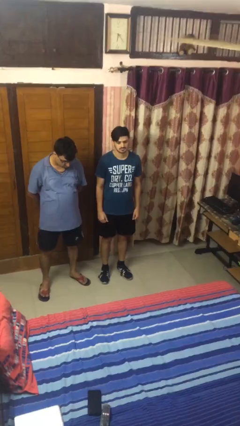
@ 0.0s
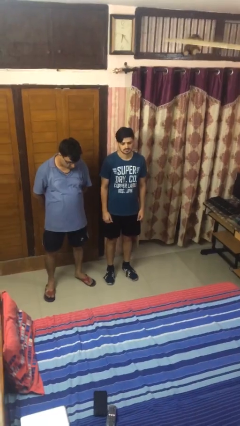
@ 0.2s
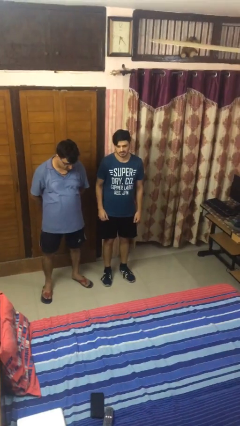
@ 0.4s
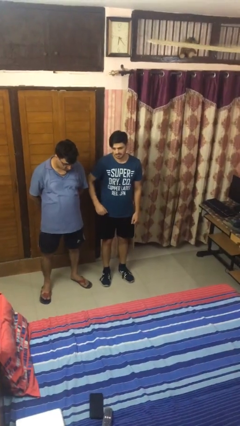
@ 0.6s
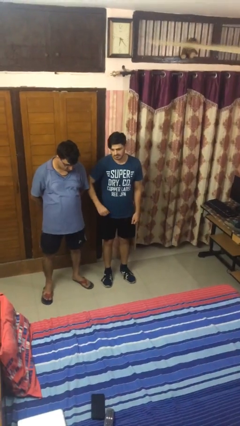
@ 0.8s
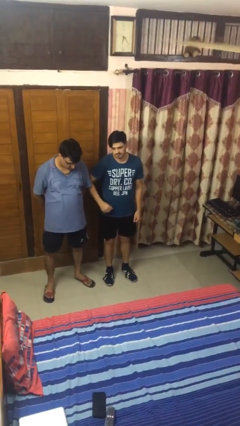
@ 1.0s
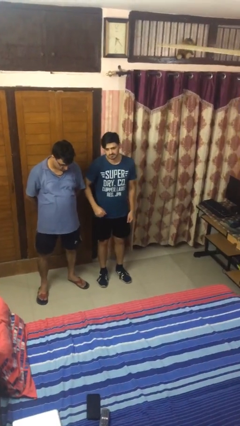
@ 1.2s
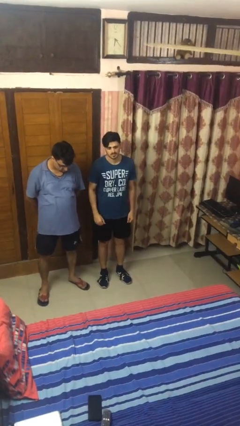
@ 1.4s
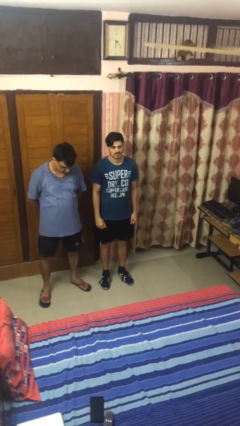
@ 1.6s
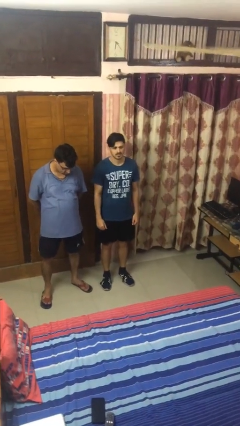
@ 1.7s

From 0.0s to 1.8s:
person nudges person with elbow

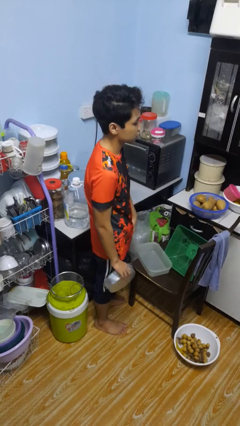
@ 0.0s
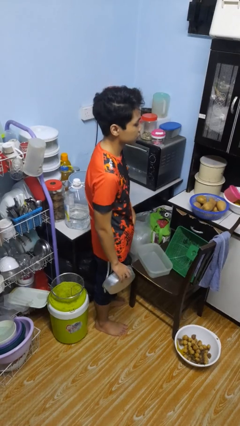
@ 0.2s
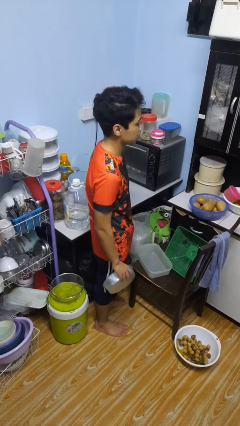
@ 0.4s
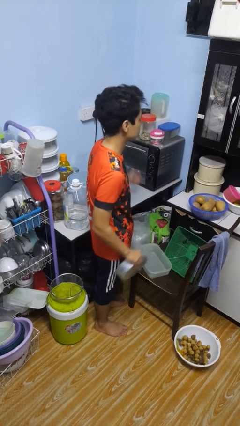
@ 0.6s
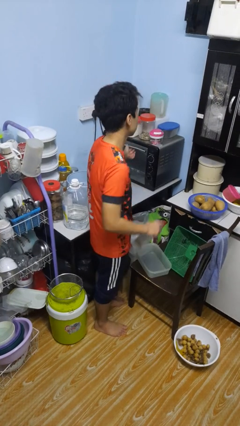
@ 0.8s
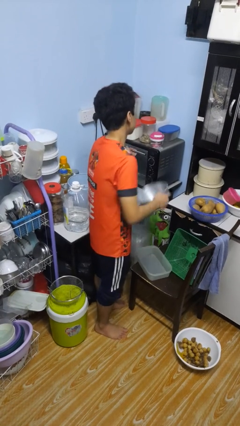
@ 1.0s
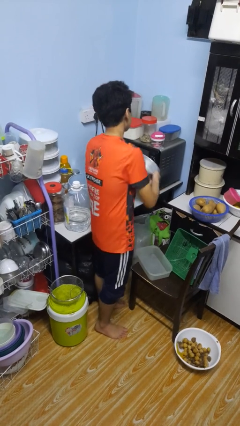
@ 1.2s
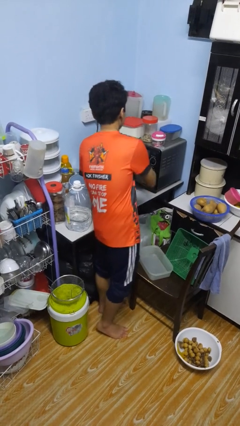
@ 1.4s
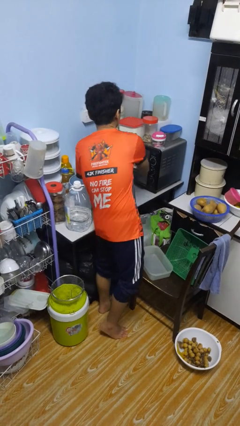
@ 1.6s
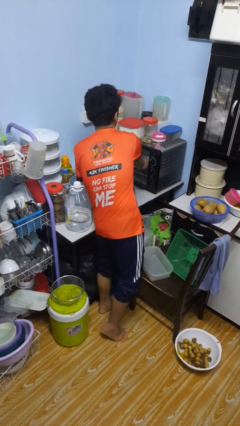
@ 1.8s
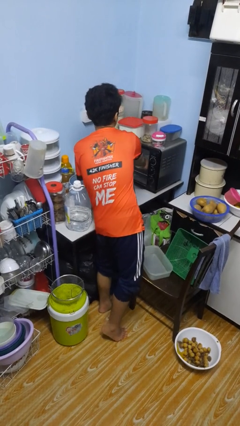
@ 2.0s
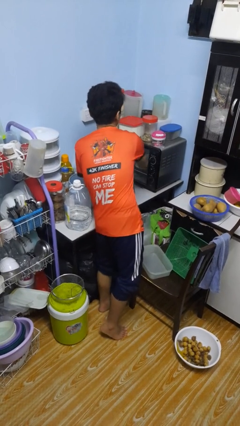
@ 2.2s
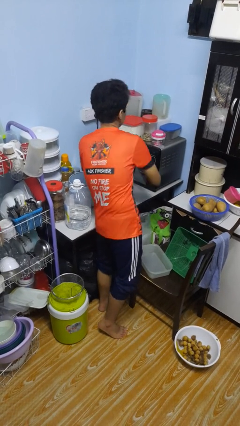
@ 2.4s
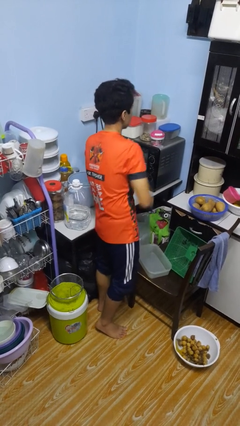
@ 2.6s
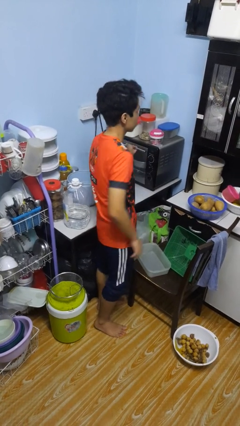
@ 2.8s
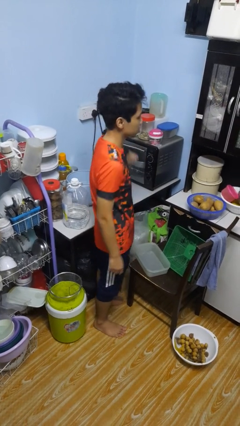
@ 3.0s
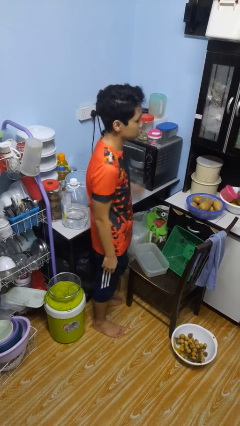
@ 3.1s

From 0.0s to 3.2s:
person puts object into oven

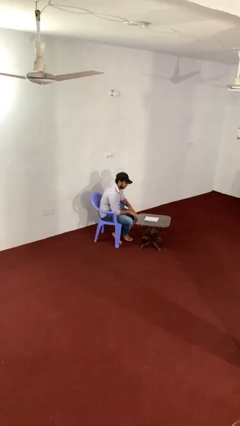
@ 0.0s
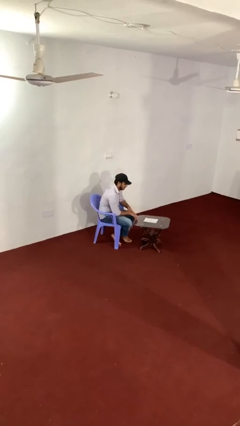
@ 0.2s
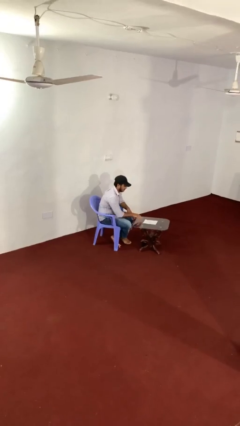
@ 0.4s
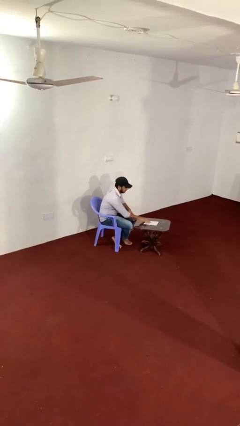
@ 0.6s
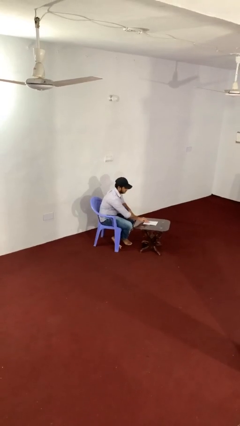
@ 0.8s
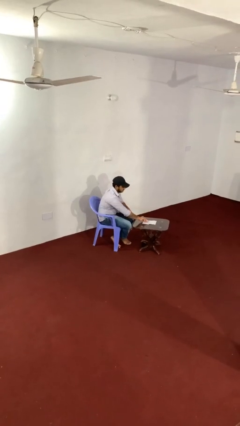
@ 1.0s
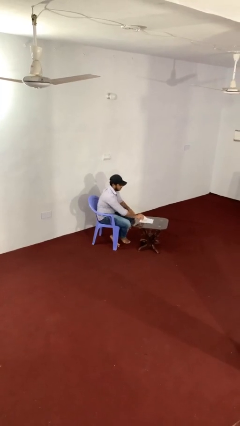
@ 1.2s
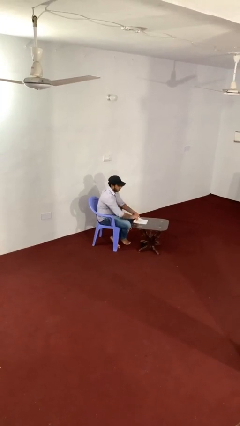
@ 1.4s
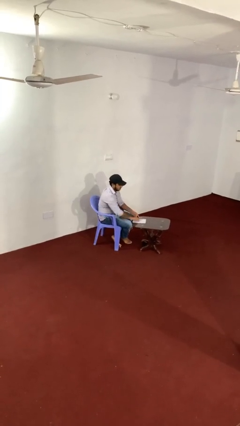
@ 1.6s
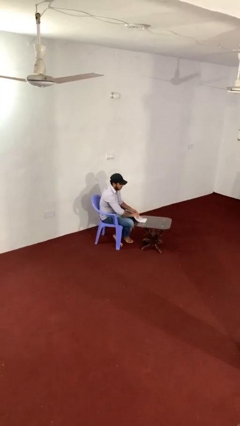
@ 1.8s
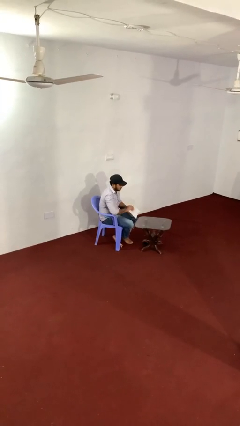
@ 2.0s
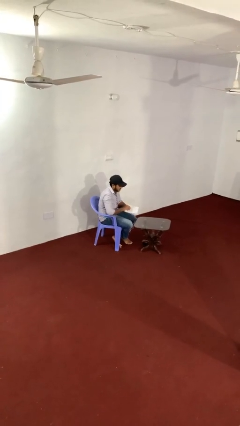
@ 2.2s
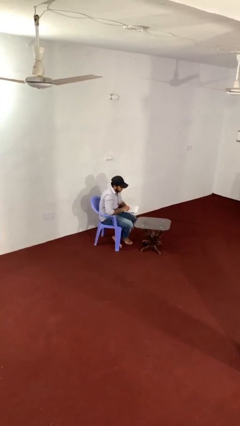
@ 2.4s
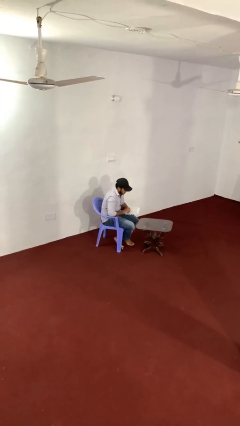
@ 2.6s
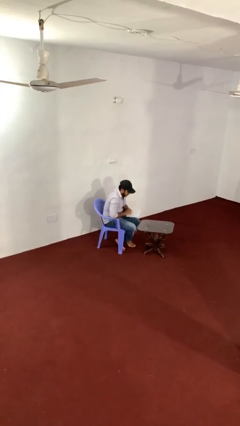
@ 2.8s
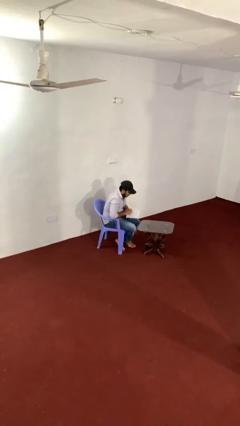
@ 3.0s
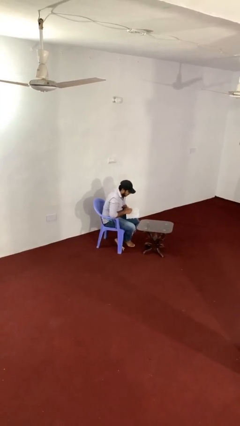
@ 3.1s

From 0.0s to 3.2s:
person picks up object from table

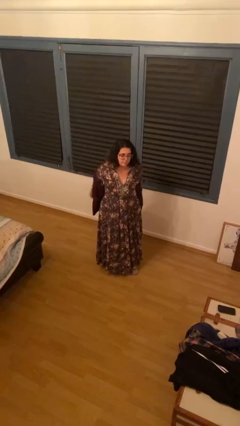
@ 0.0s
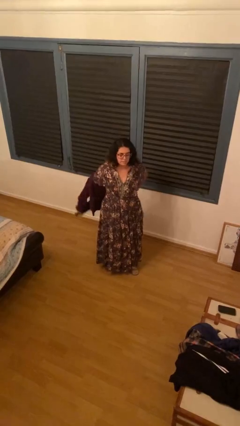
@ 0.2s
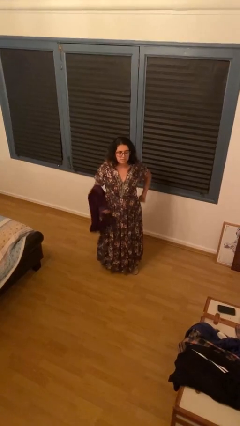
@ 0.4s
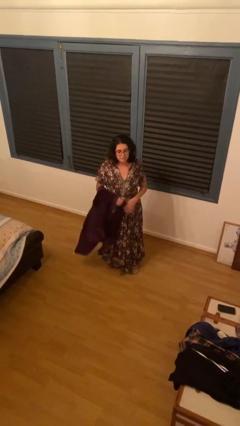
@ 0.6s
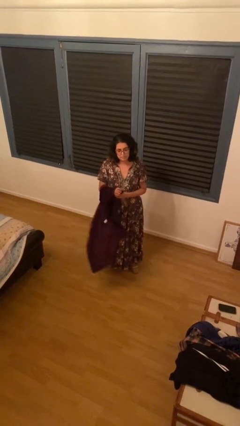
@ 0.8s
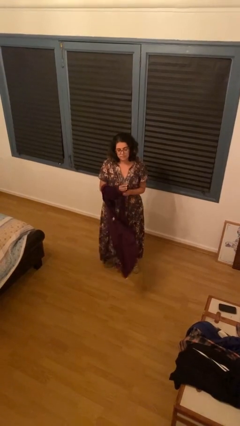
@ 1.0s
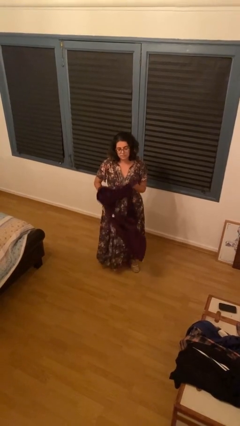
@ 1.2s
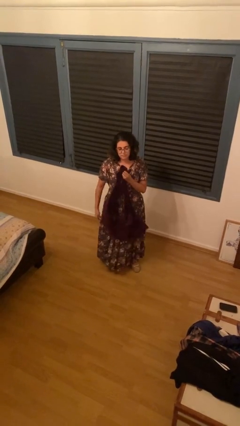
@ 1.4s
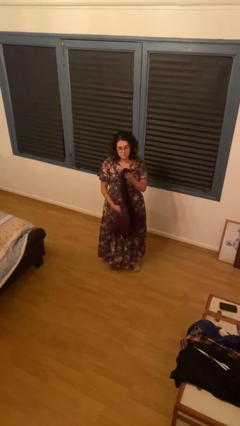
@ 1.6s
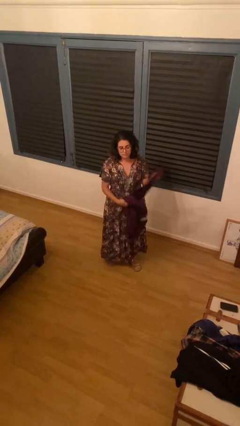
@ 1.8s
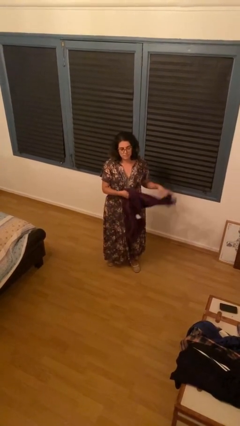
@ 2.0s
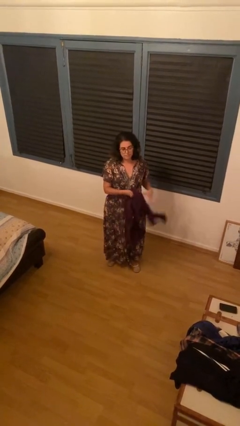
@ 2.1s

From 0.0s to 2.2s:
person takes off jacket

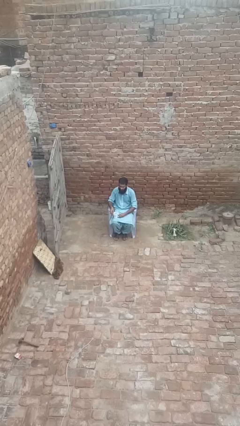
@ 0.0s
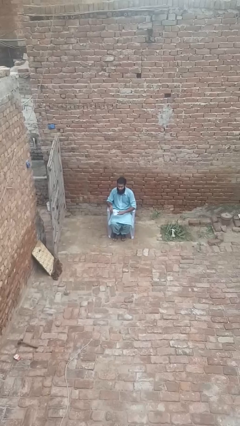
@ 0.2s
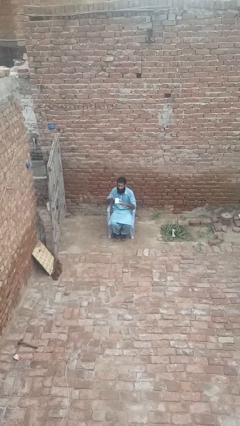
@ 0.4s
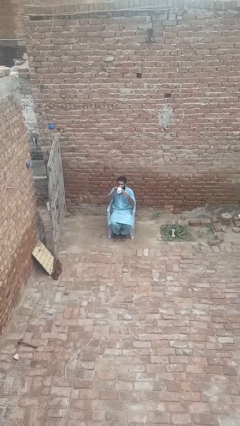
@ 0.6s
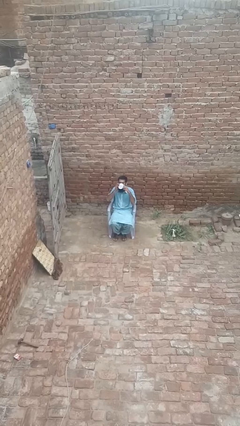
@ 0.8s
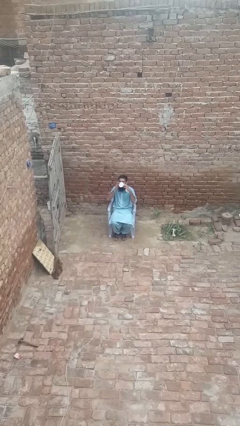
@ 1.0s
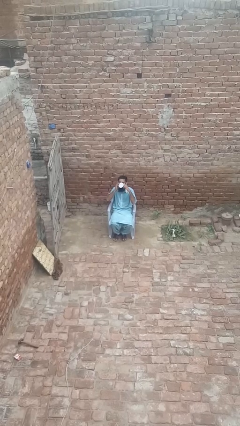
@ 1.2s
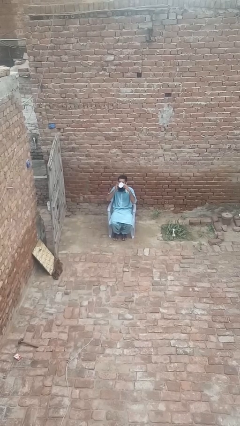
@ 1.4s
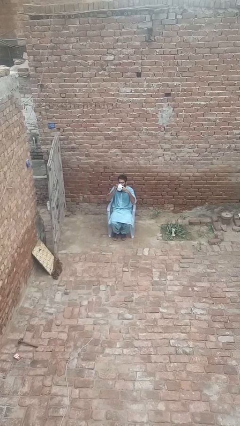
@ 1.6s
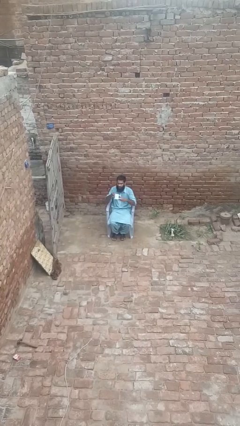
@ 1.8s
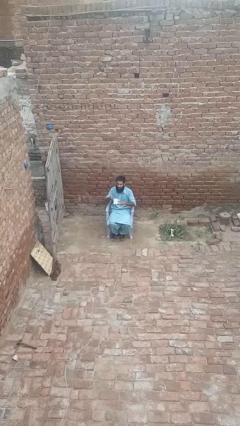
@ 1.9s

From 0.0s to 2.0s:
person drinks from mug

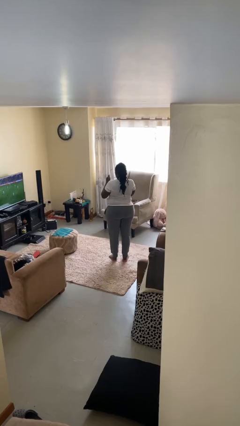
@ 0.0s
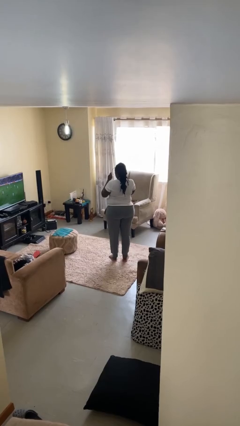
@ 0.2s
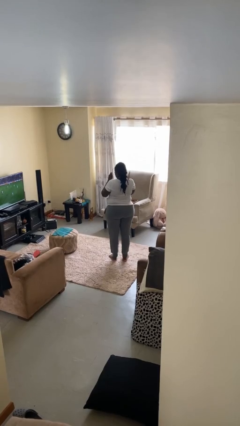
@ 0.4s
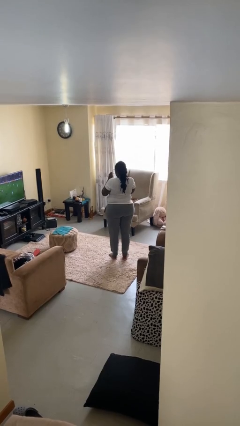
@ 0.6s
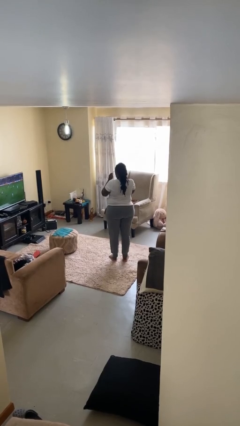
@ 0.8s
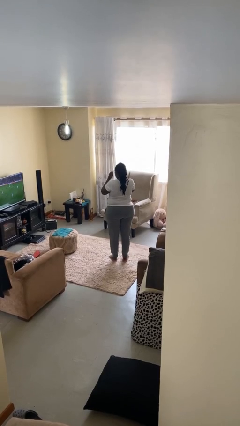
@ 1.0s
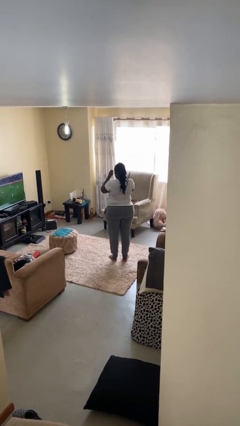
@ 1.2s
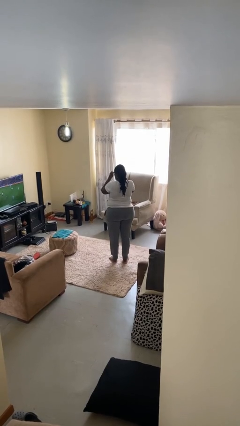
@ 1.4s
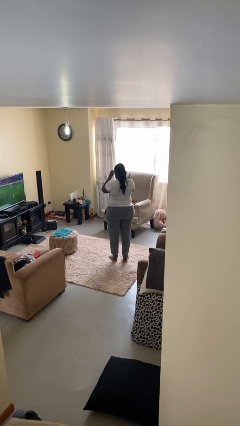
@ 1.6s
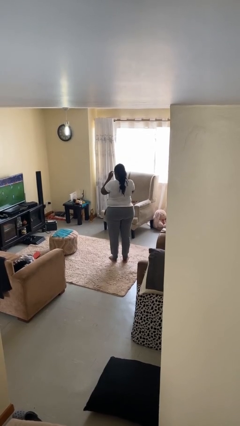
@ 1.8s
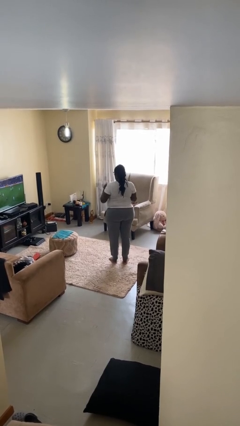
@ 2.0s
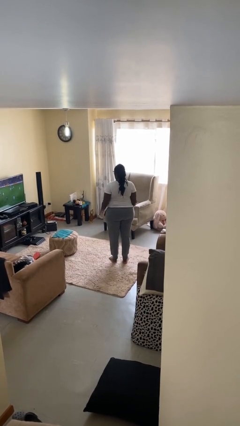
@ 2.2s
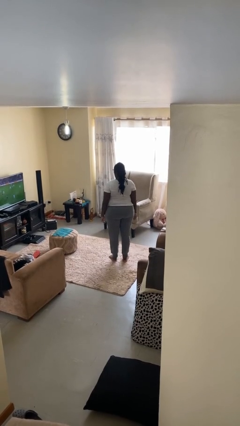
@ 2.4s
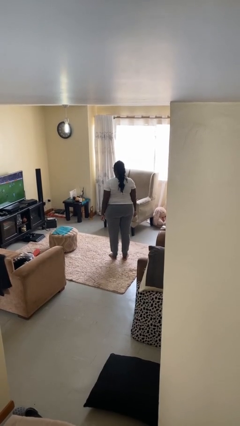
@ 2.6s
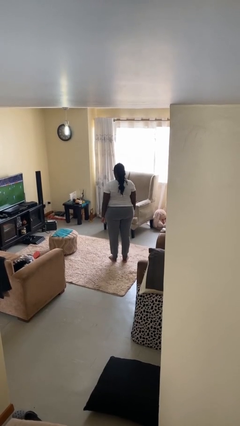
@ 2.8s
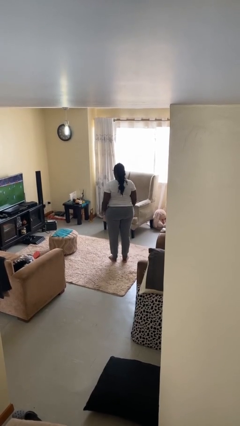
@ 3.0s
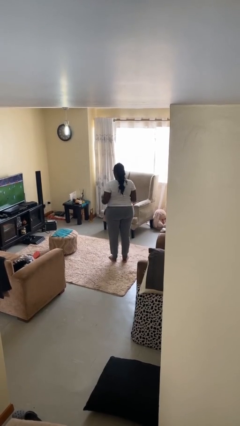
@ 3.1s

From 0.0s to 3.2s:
person puts on glasses

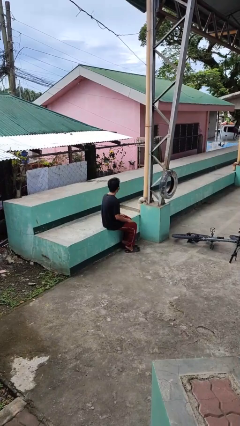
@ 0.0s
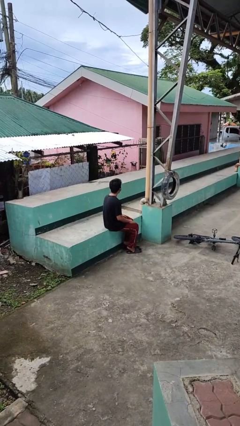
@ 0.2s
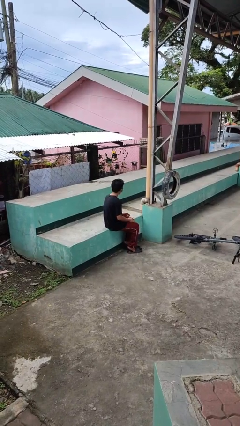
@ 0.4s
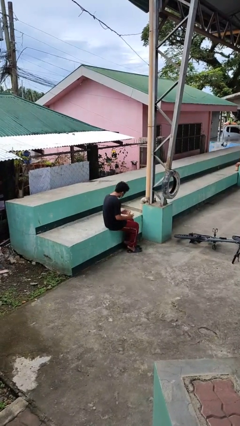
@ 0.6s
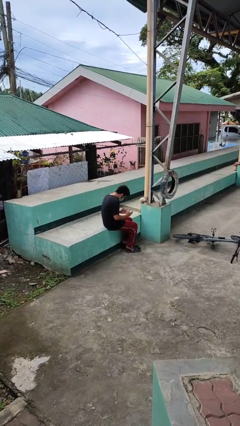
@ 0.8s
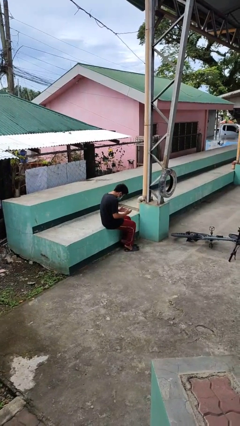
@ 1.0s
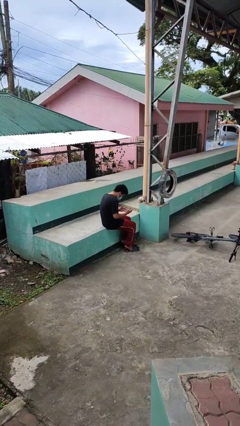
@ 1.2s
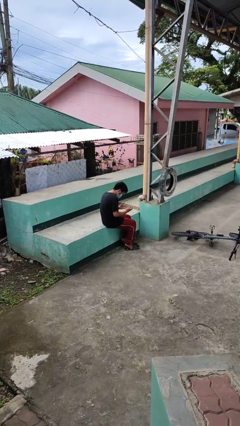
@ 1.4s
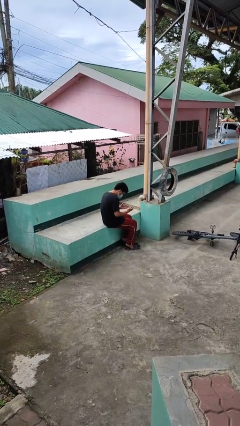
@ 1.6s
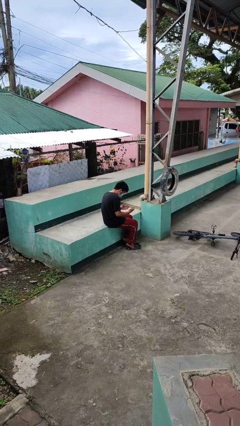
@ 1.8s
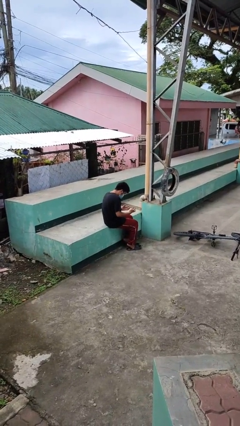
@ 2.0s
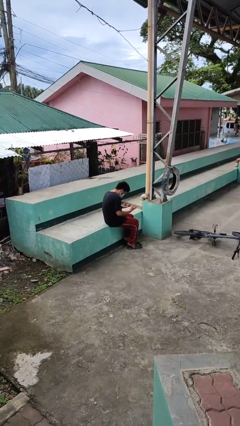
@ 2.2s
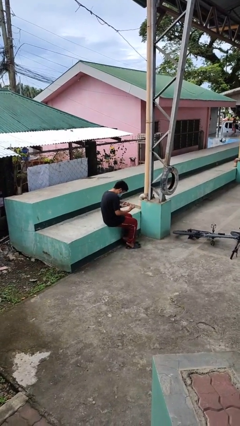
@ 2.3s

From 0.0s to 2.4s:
person looks at hands in lap
